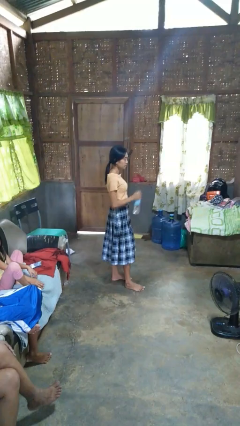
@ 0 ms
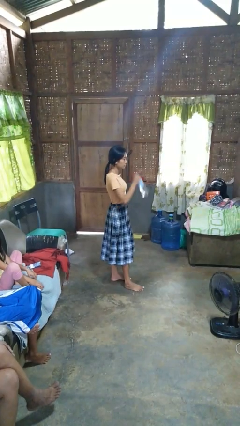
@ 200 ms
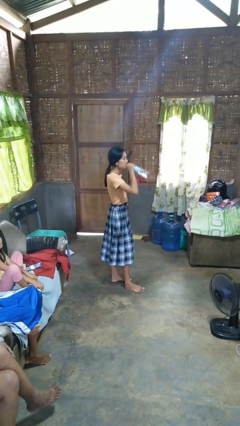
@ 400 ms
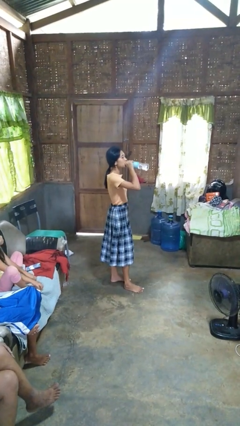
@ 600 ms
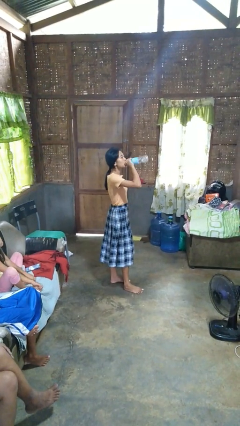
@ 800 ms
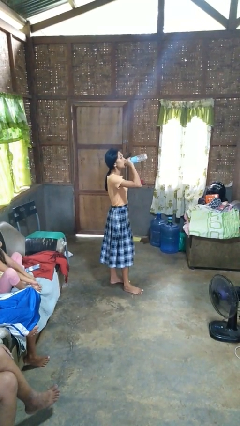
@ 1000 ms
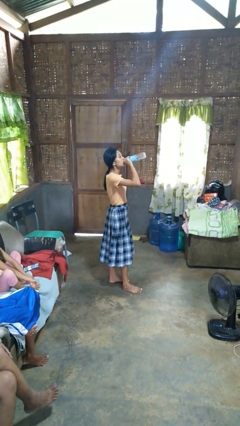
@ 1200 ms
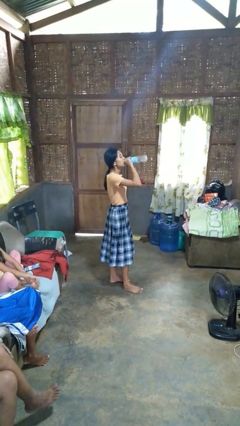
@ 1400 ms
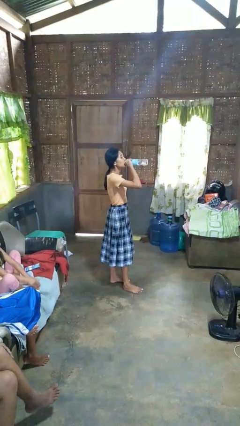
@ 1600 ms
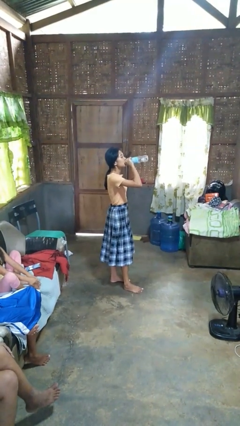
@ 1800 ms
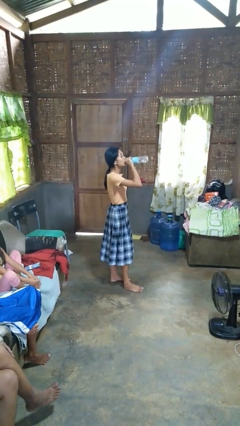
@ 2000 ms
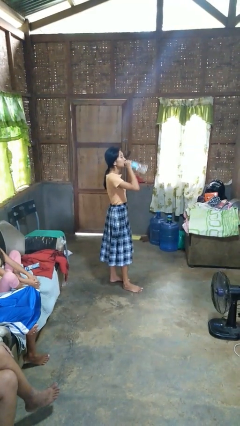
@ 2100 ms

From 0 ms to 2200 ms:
person drinks from bottle

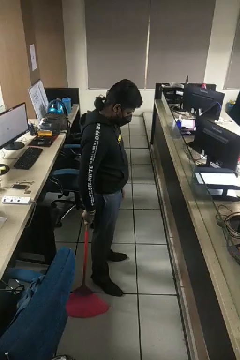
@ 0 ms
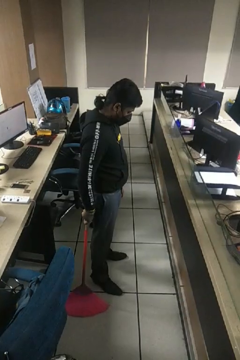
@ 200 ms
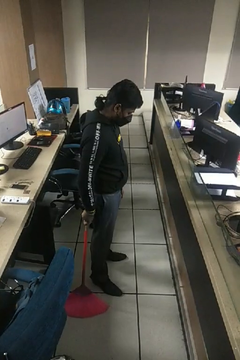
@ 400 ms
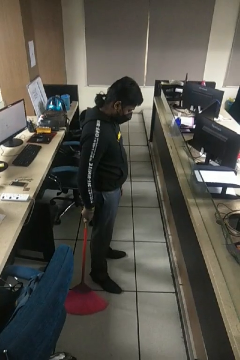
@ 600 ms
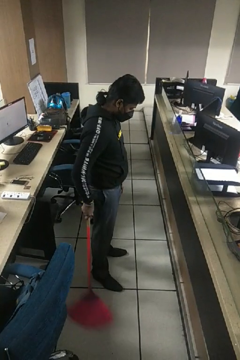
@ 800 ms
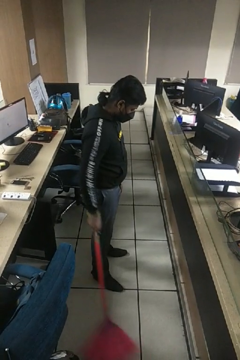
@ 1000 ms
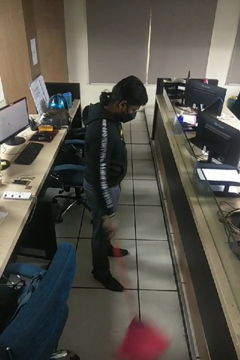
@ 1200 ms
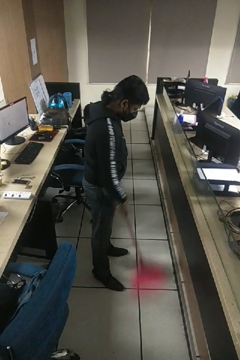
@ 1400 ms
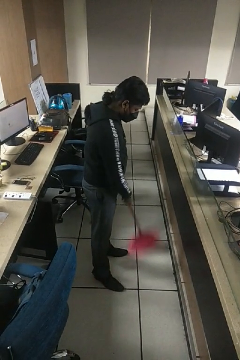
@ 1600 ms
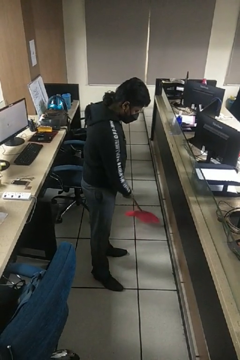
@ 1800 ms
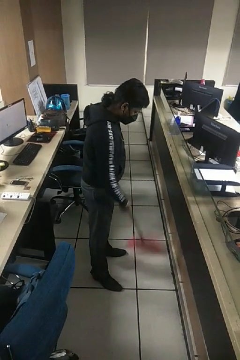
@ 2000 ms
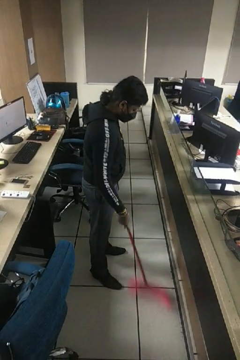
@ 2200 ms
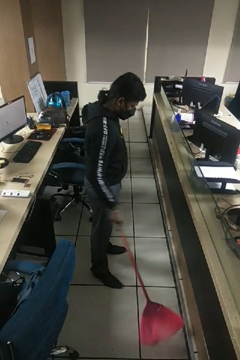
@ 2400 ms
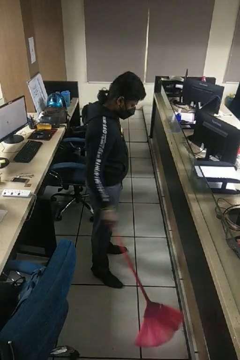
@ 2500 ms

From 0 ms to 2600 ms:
person sweeps floor

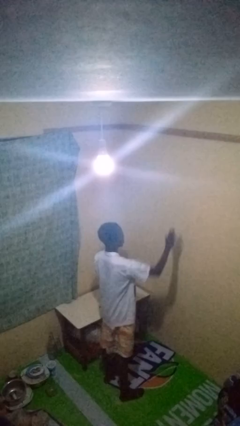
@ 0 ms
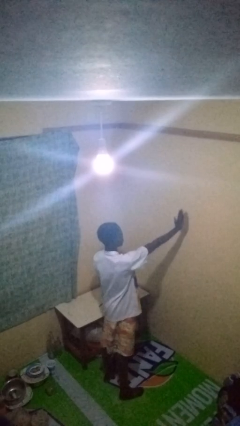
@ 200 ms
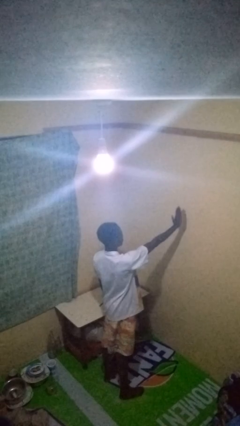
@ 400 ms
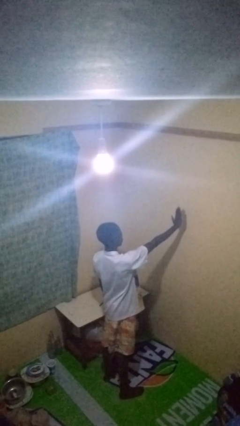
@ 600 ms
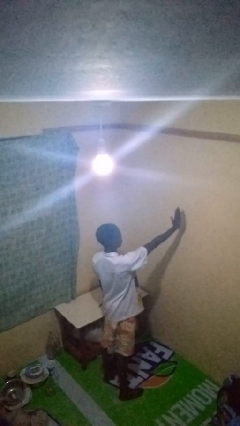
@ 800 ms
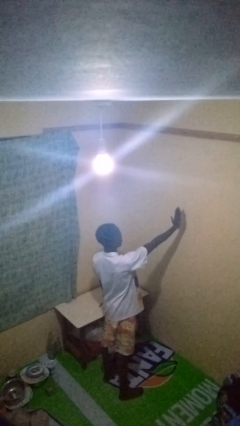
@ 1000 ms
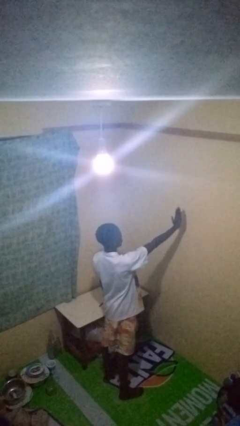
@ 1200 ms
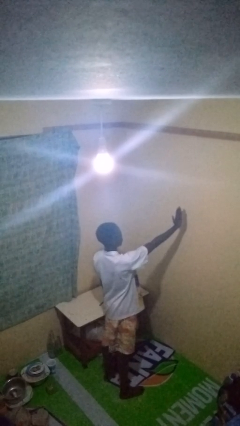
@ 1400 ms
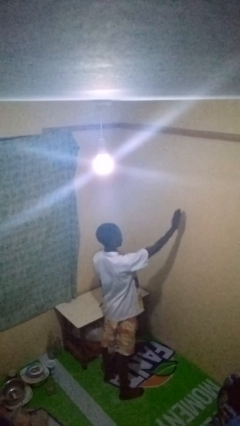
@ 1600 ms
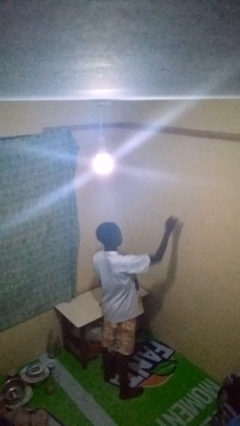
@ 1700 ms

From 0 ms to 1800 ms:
person gestures stop

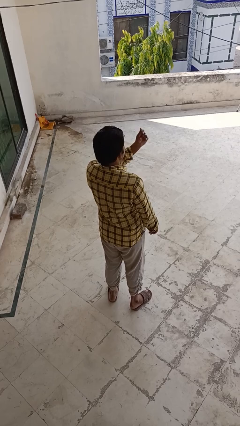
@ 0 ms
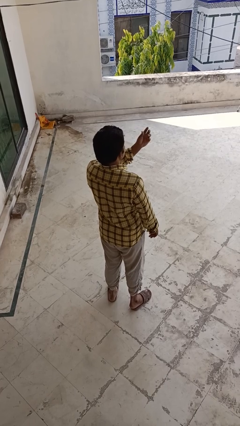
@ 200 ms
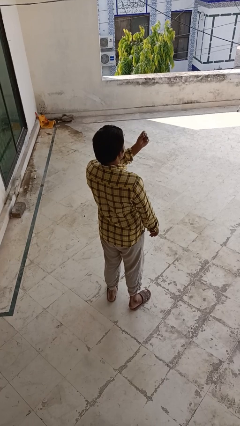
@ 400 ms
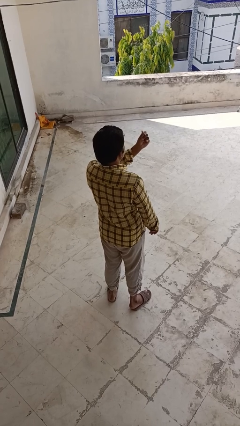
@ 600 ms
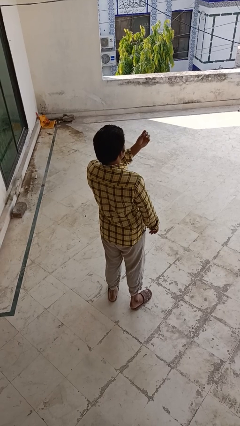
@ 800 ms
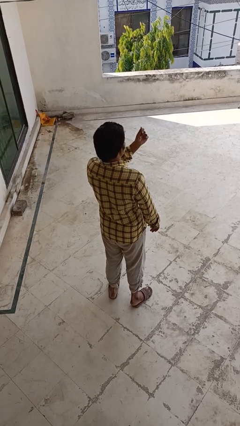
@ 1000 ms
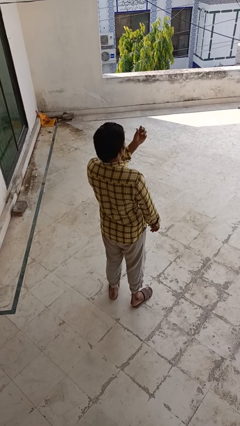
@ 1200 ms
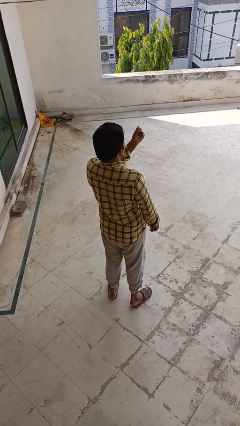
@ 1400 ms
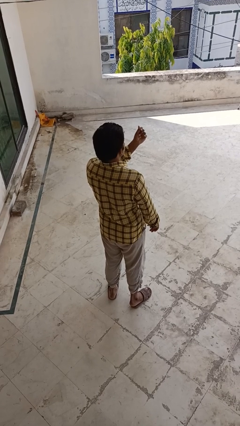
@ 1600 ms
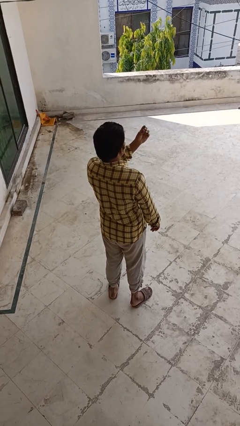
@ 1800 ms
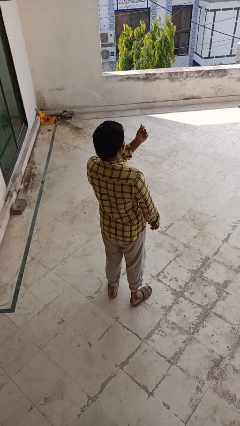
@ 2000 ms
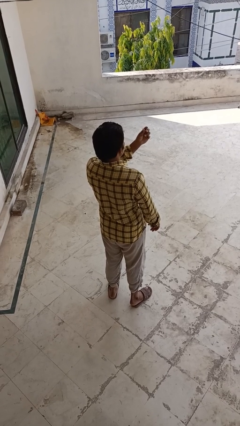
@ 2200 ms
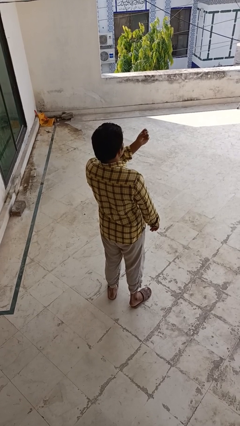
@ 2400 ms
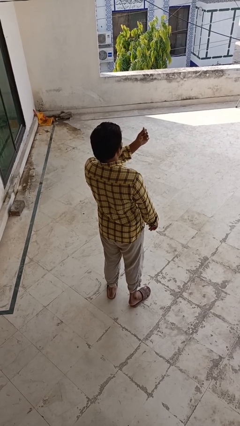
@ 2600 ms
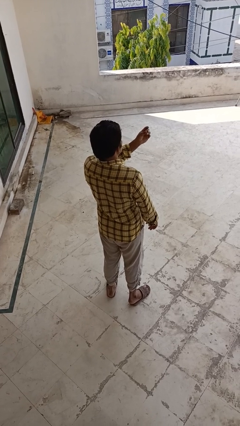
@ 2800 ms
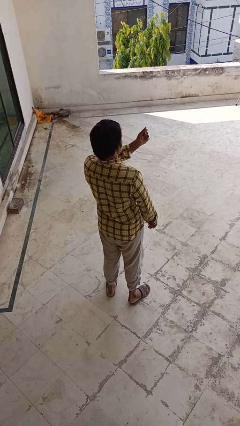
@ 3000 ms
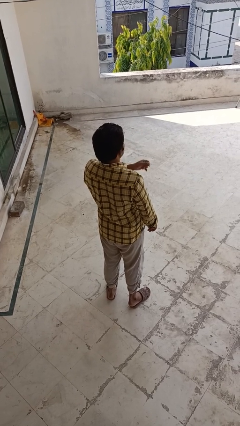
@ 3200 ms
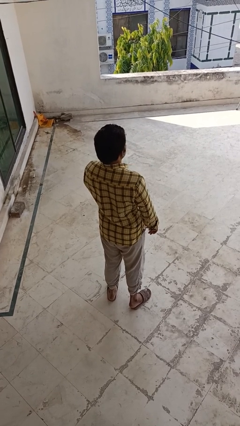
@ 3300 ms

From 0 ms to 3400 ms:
person snaps fingers

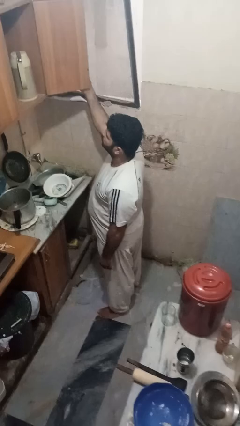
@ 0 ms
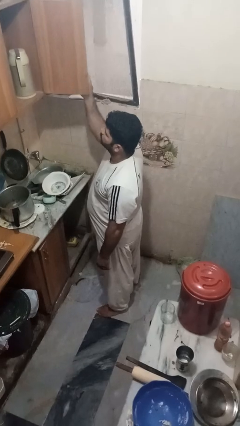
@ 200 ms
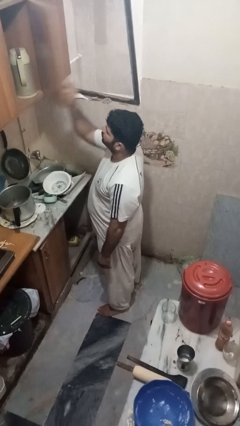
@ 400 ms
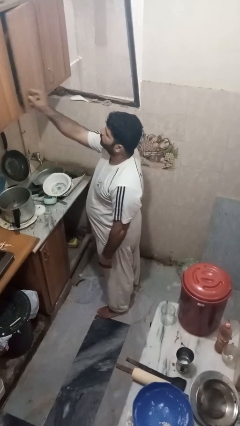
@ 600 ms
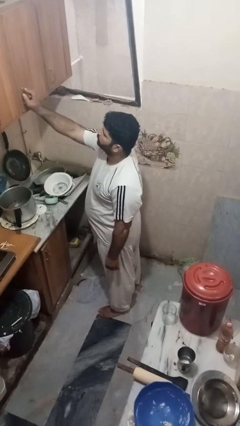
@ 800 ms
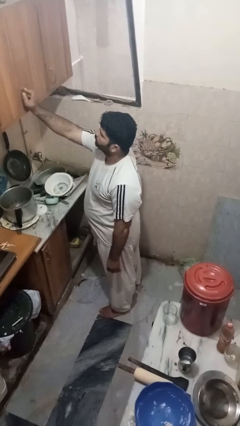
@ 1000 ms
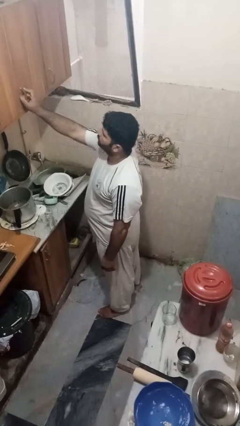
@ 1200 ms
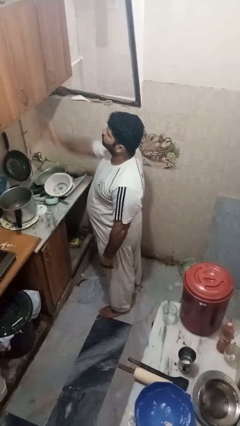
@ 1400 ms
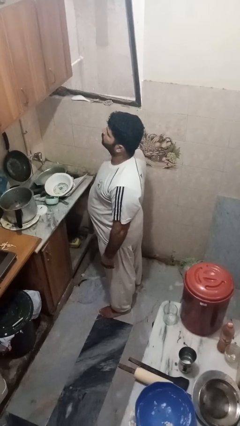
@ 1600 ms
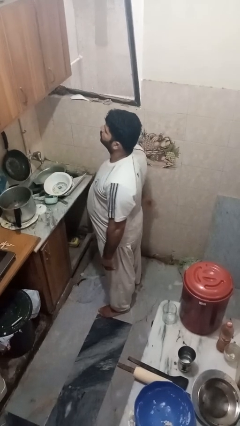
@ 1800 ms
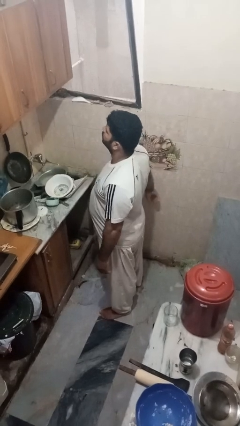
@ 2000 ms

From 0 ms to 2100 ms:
person closes cabinet

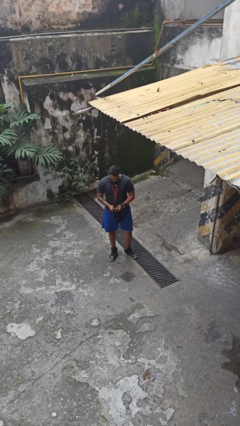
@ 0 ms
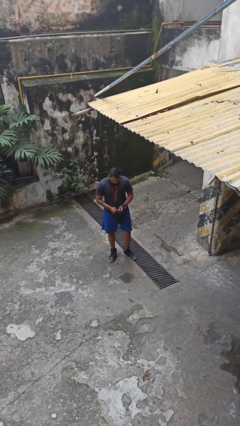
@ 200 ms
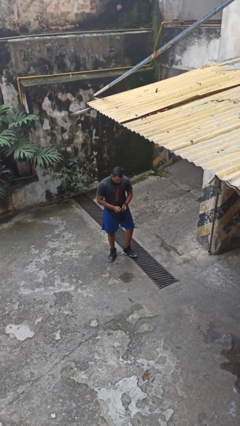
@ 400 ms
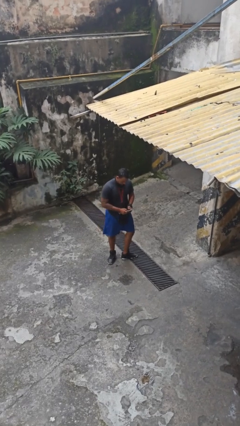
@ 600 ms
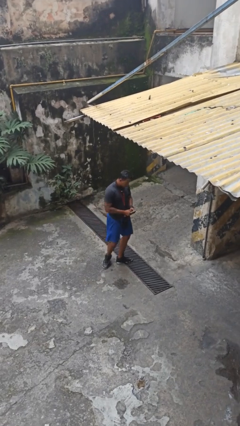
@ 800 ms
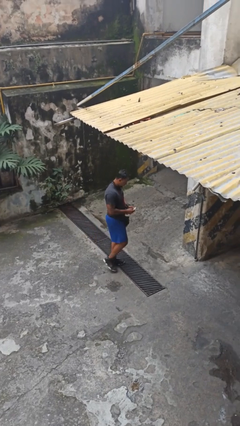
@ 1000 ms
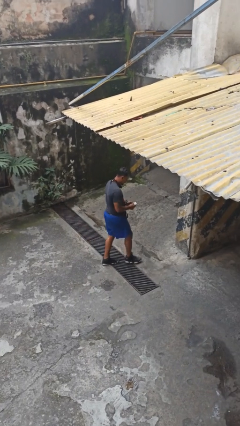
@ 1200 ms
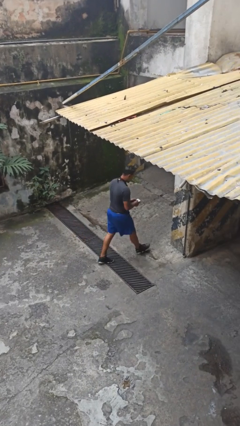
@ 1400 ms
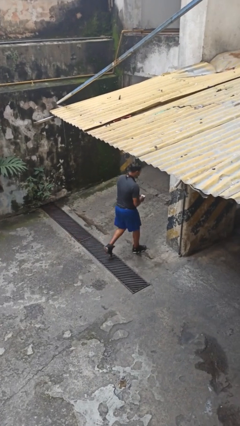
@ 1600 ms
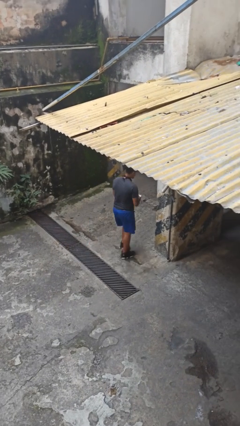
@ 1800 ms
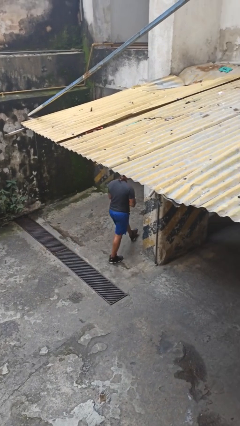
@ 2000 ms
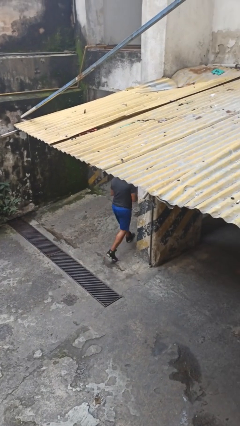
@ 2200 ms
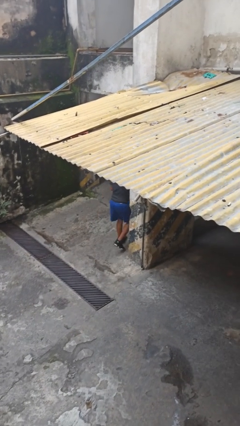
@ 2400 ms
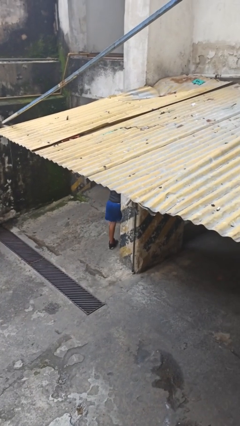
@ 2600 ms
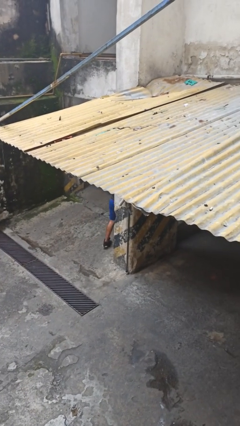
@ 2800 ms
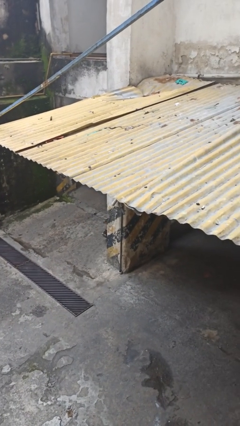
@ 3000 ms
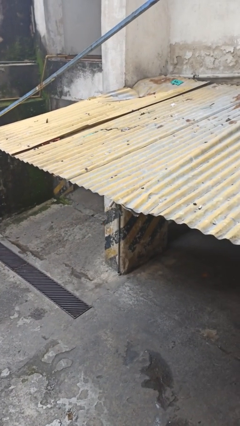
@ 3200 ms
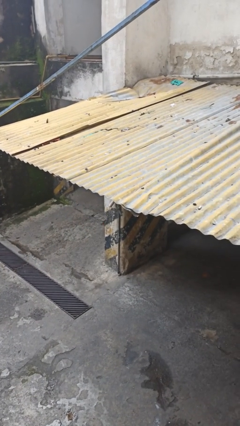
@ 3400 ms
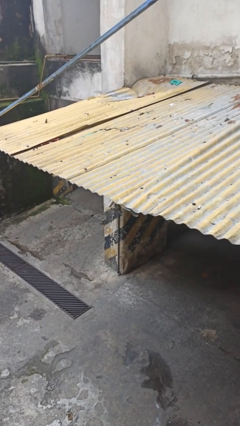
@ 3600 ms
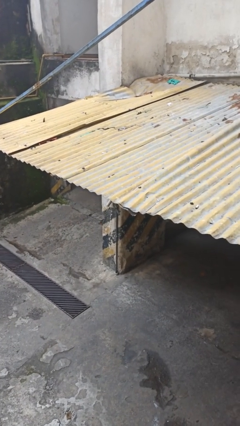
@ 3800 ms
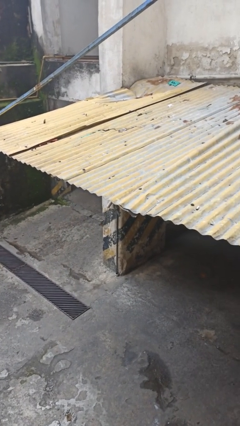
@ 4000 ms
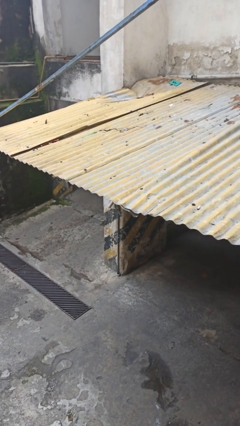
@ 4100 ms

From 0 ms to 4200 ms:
person exits scene through structure

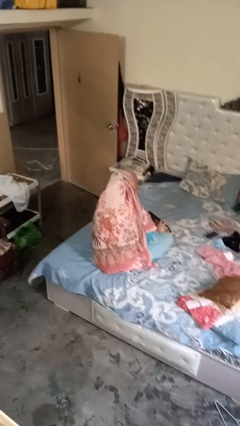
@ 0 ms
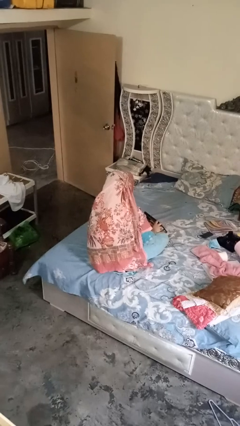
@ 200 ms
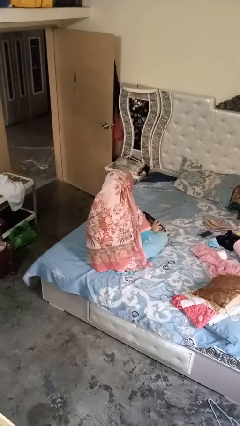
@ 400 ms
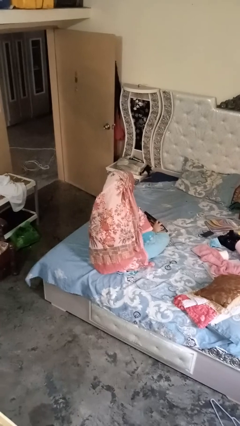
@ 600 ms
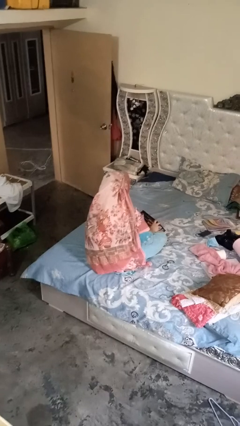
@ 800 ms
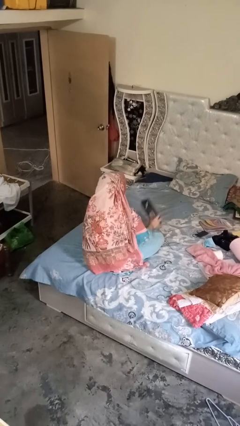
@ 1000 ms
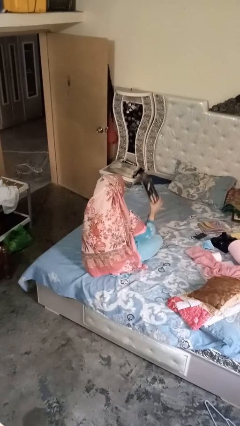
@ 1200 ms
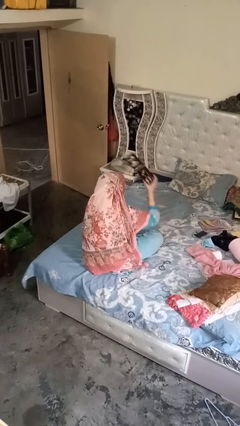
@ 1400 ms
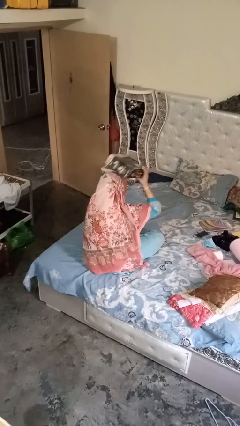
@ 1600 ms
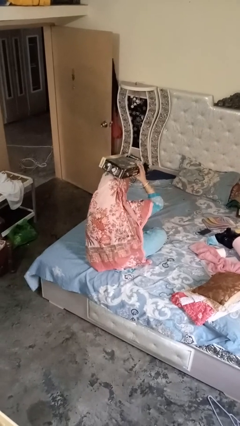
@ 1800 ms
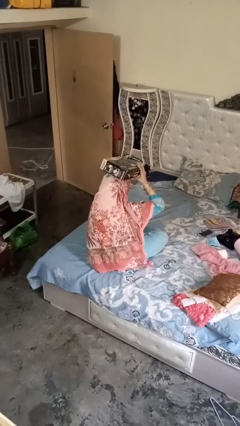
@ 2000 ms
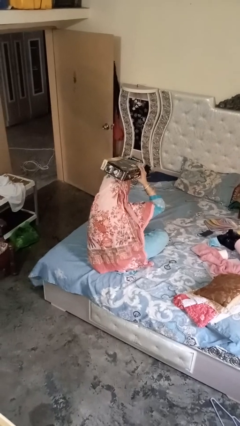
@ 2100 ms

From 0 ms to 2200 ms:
person holds object above head
